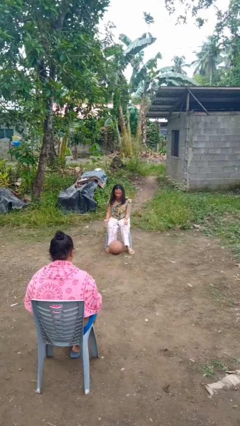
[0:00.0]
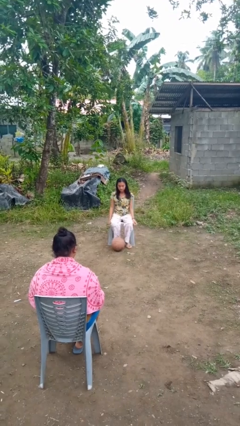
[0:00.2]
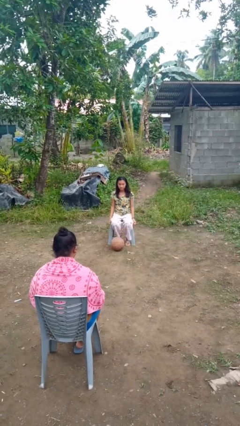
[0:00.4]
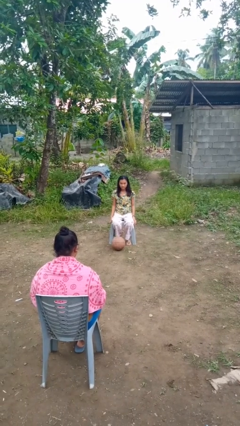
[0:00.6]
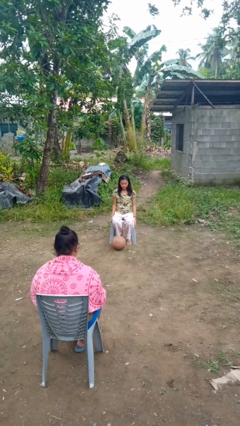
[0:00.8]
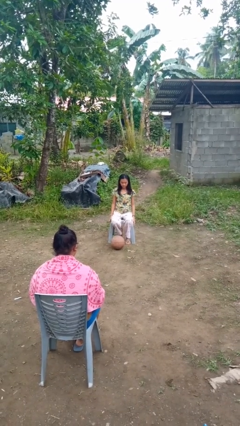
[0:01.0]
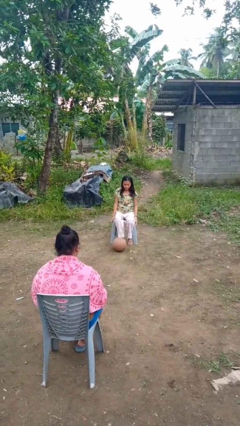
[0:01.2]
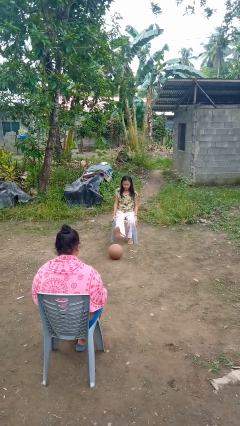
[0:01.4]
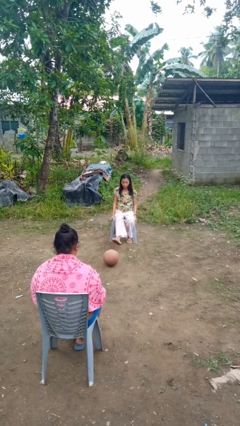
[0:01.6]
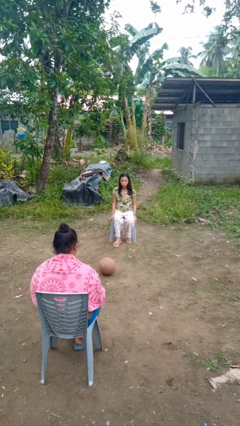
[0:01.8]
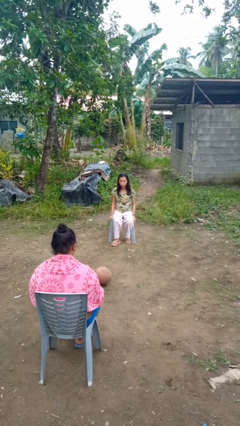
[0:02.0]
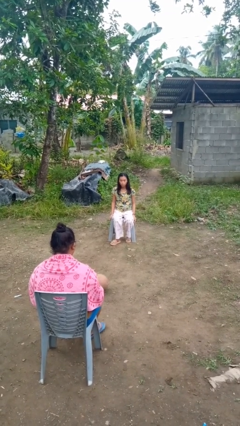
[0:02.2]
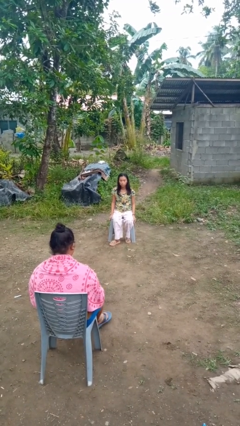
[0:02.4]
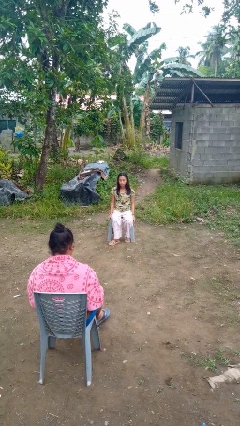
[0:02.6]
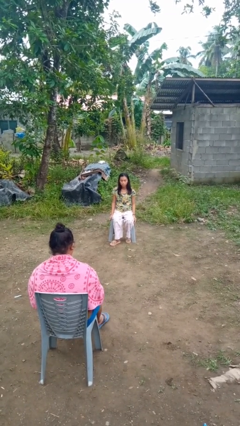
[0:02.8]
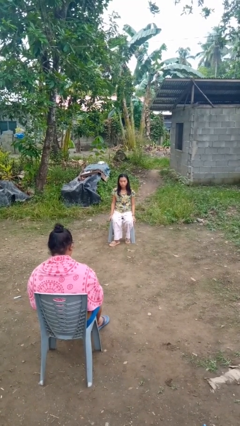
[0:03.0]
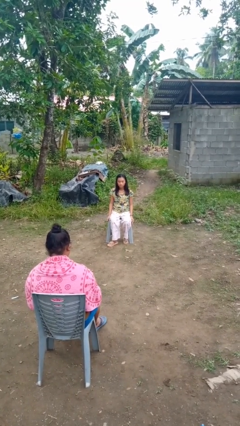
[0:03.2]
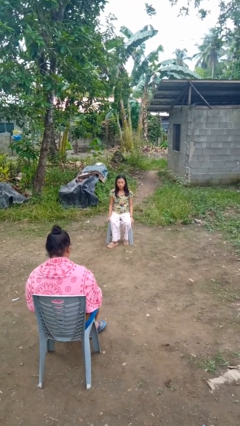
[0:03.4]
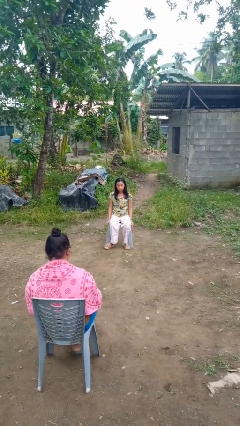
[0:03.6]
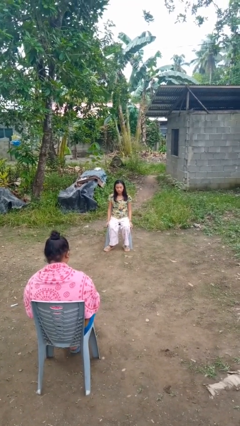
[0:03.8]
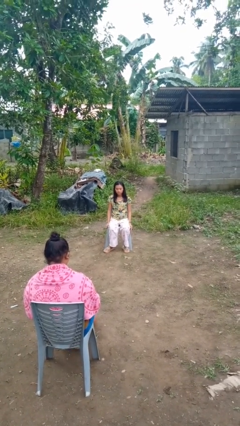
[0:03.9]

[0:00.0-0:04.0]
person kicks object to person

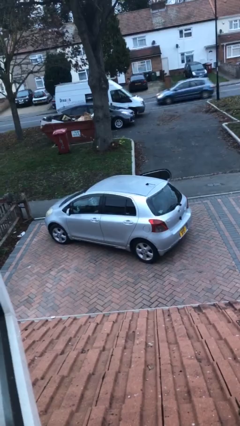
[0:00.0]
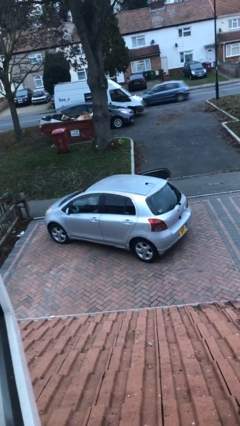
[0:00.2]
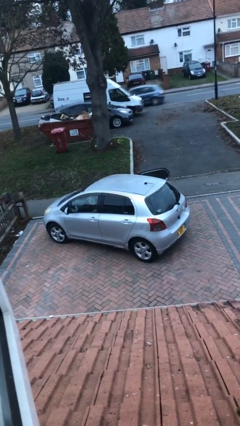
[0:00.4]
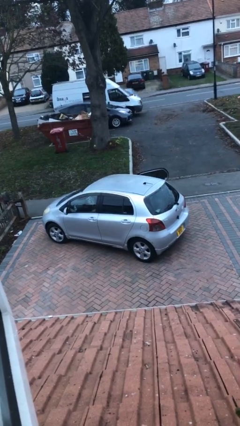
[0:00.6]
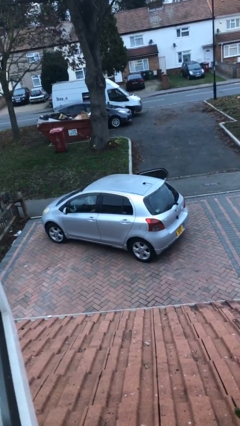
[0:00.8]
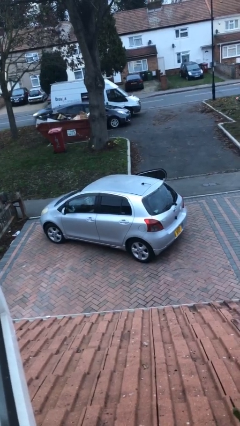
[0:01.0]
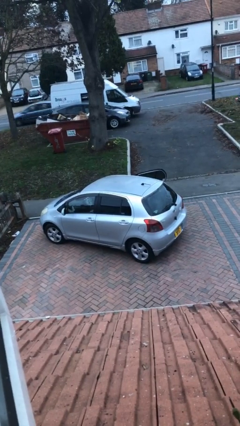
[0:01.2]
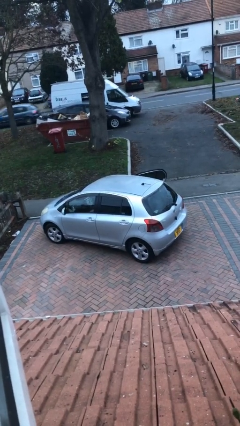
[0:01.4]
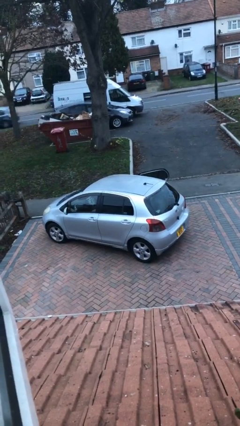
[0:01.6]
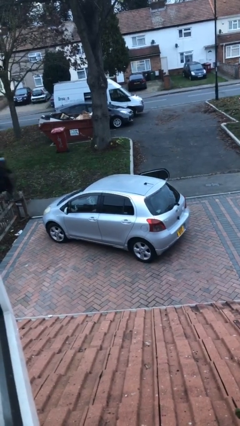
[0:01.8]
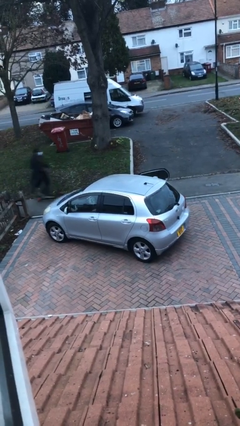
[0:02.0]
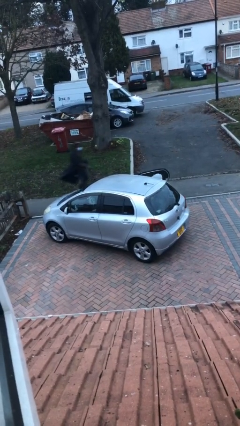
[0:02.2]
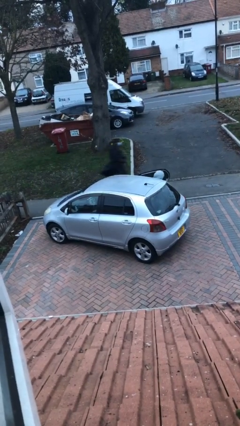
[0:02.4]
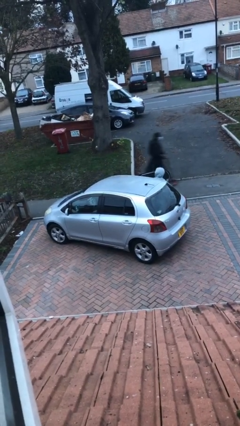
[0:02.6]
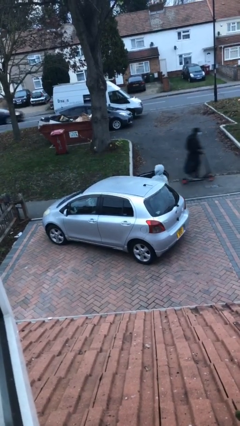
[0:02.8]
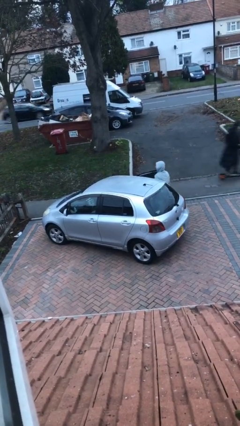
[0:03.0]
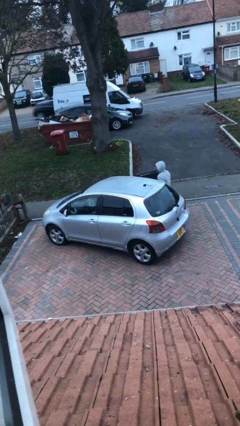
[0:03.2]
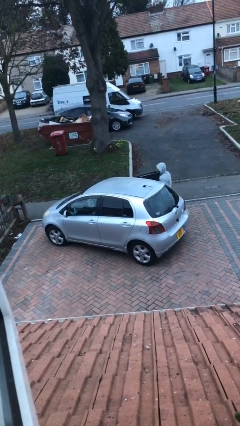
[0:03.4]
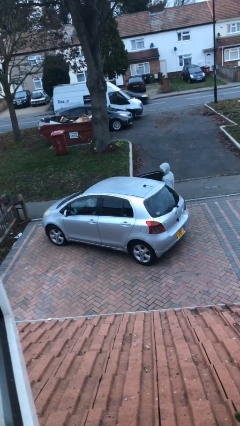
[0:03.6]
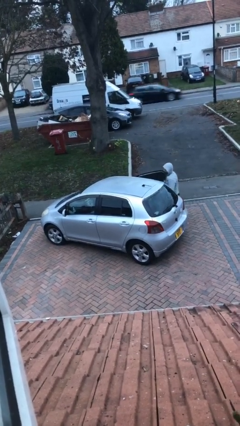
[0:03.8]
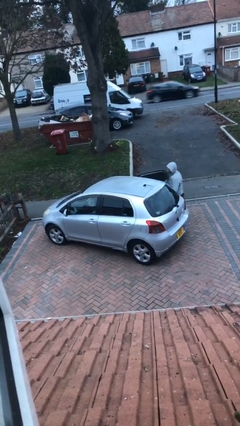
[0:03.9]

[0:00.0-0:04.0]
car drops off person

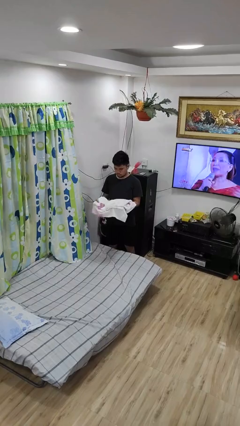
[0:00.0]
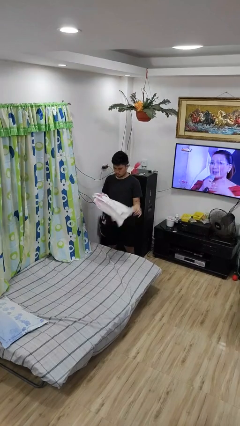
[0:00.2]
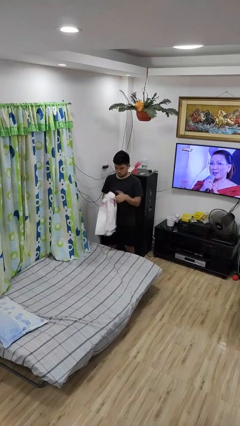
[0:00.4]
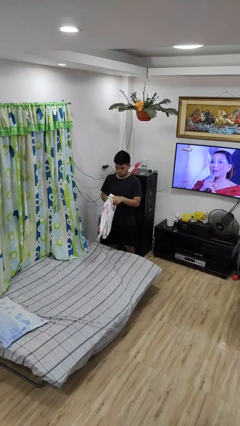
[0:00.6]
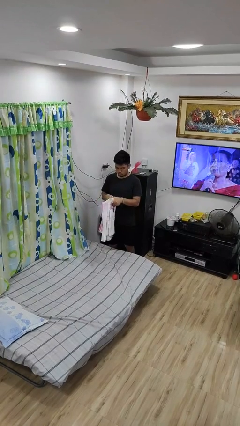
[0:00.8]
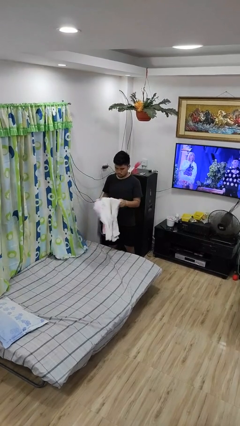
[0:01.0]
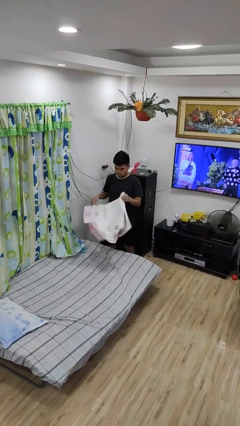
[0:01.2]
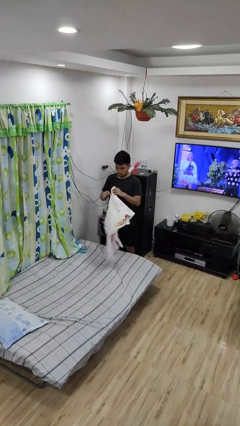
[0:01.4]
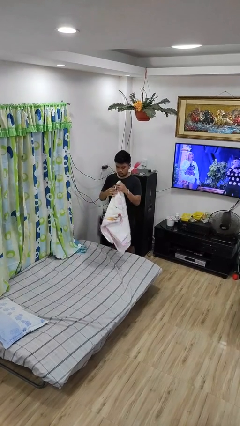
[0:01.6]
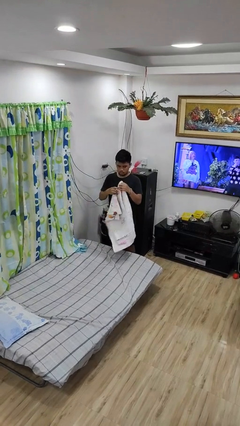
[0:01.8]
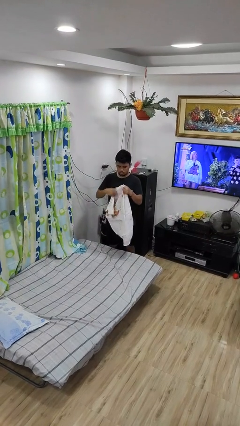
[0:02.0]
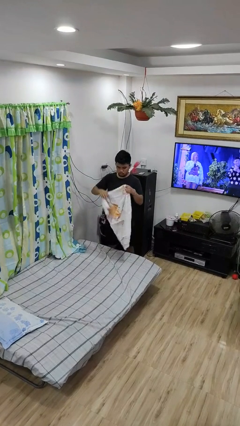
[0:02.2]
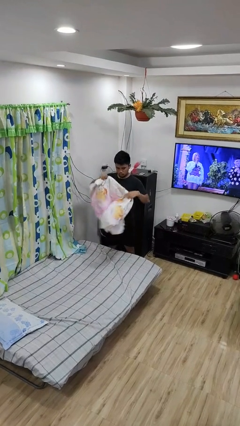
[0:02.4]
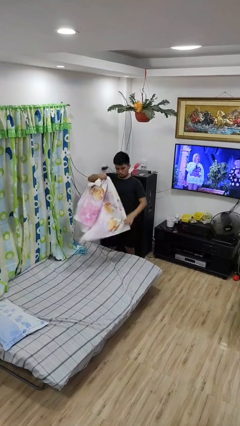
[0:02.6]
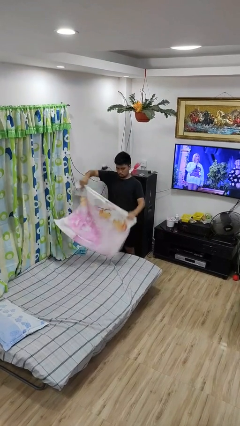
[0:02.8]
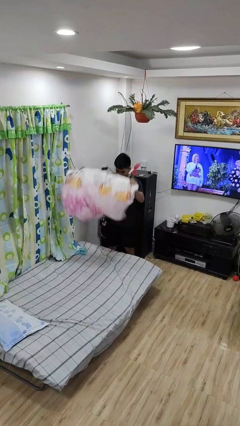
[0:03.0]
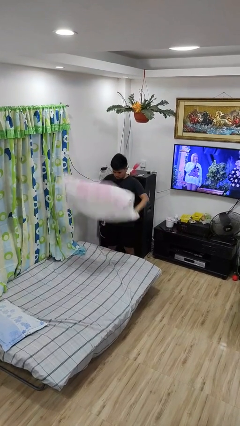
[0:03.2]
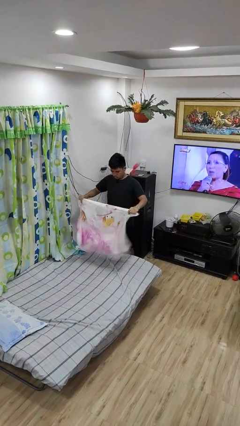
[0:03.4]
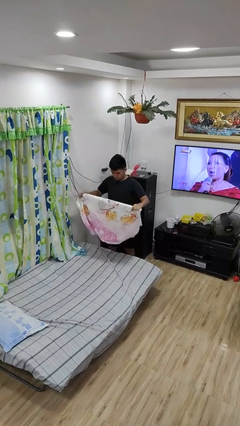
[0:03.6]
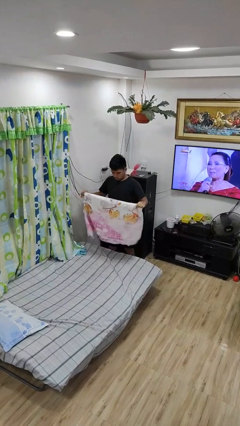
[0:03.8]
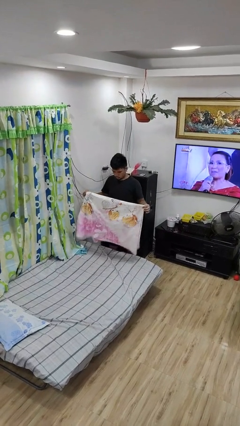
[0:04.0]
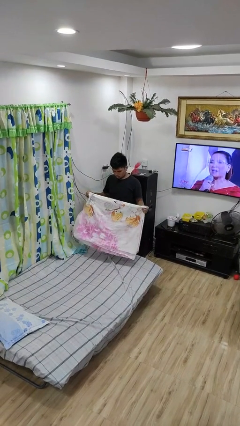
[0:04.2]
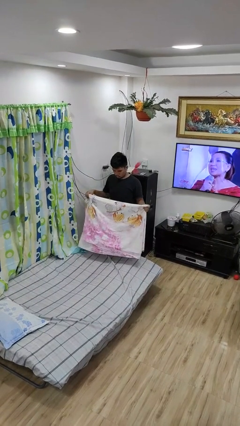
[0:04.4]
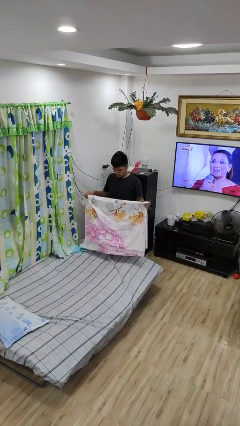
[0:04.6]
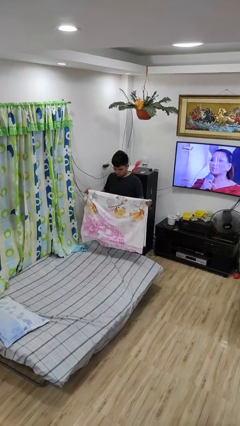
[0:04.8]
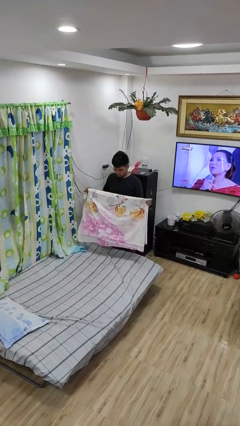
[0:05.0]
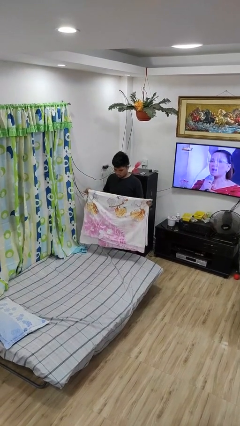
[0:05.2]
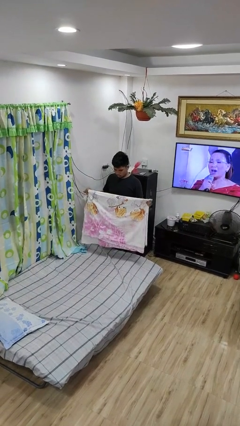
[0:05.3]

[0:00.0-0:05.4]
person unfolds blanket

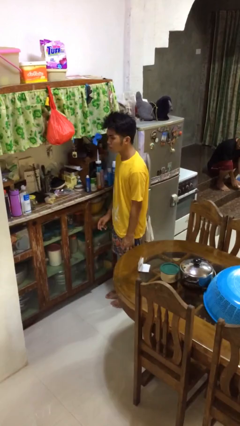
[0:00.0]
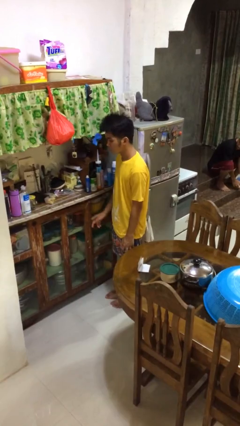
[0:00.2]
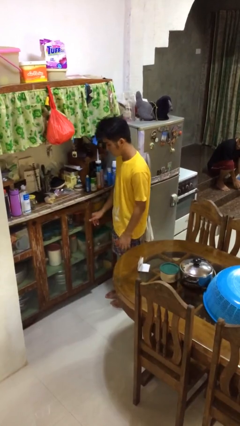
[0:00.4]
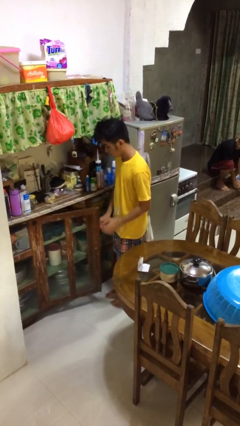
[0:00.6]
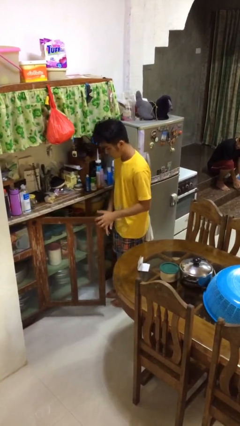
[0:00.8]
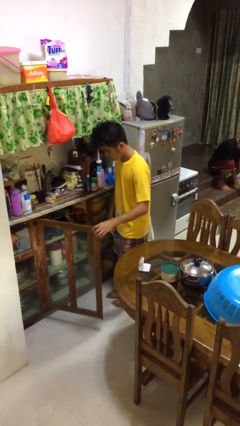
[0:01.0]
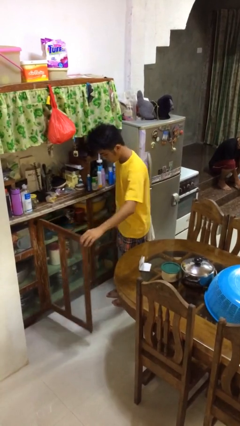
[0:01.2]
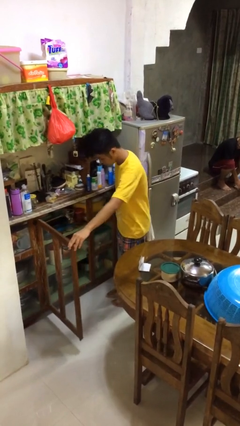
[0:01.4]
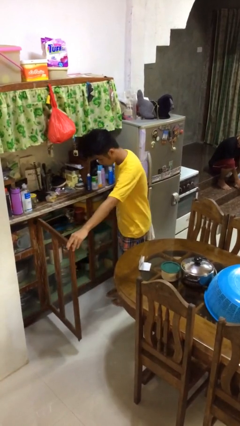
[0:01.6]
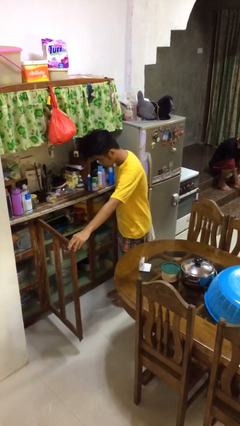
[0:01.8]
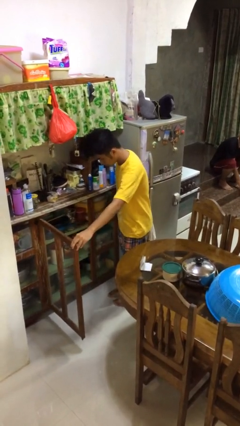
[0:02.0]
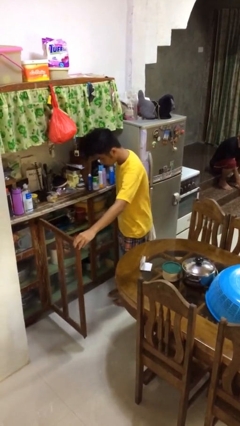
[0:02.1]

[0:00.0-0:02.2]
person opens cabinet

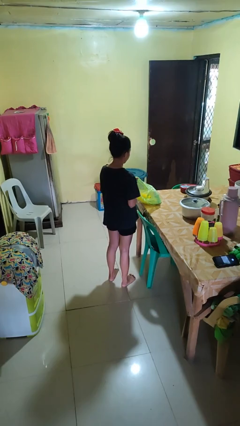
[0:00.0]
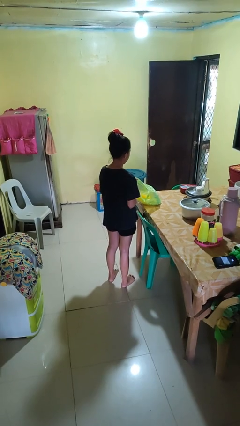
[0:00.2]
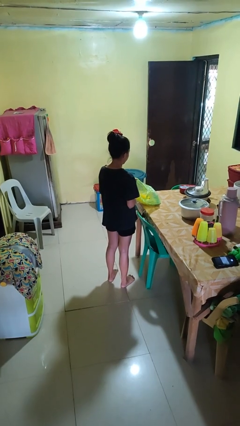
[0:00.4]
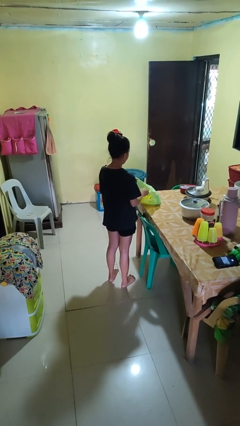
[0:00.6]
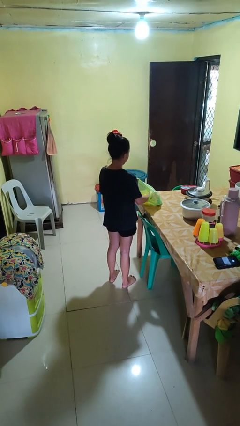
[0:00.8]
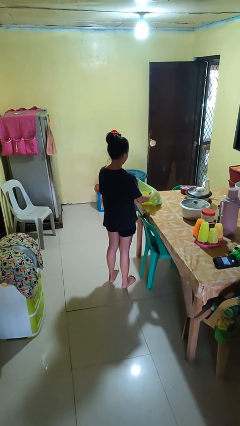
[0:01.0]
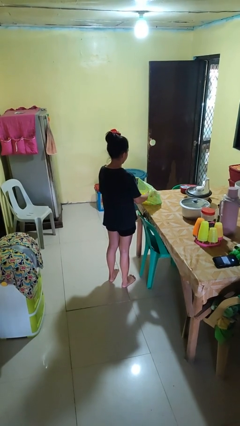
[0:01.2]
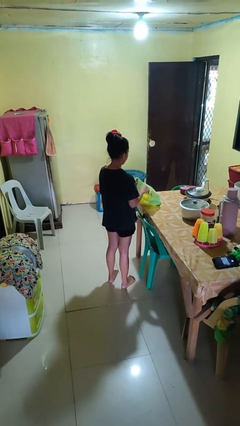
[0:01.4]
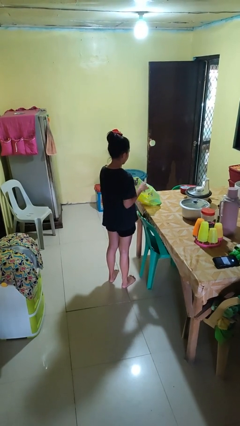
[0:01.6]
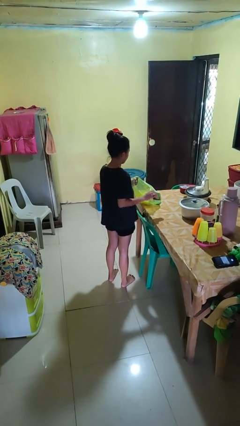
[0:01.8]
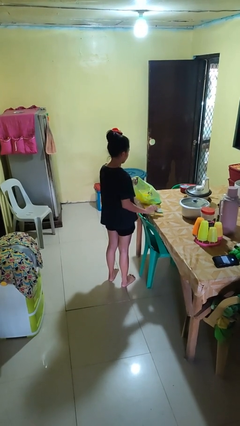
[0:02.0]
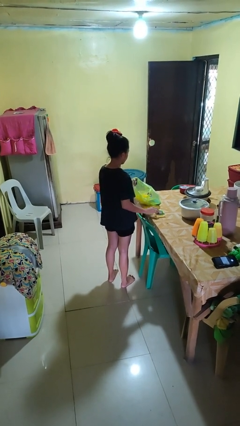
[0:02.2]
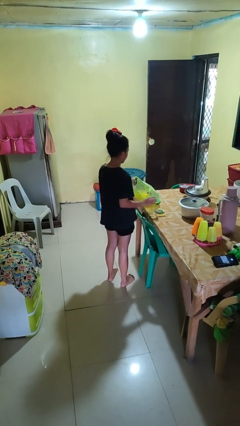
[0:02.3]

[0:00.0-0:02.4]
person takes object from bag
